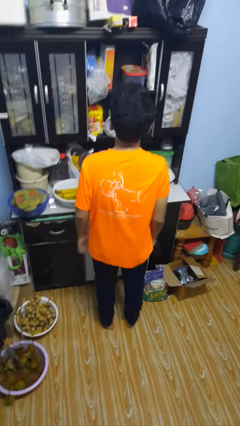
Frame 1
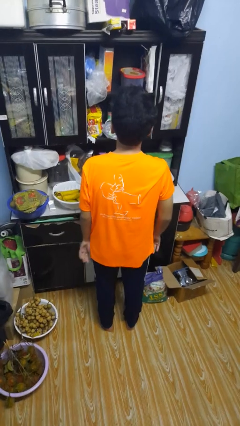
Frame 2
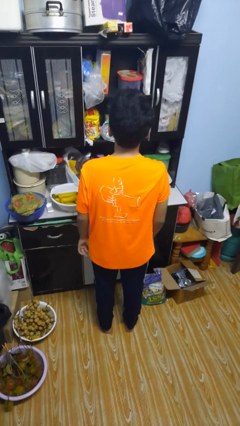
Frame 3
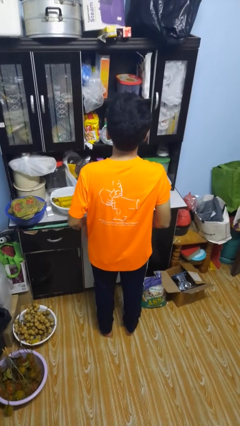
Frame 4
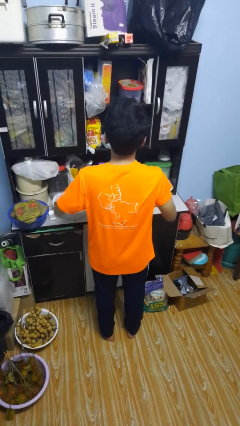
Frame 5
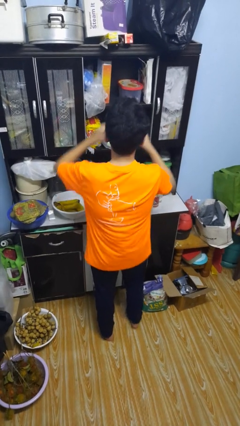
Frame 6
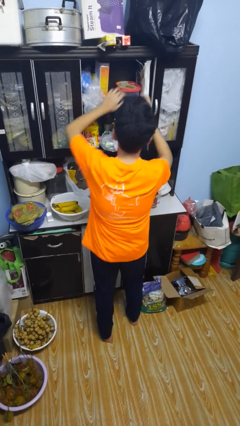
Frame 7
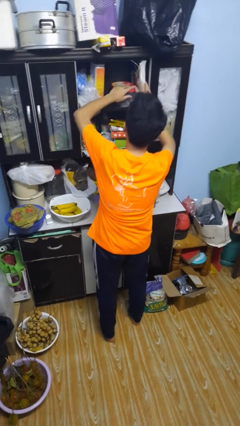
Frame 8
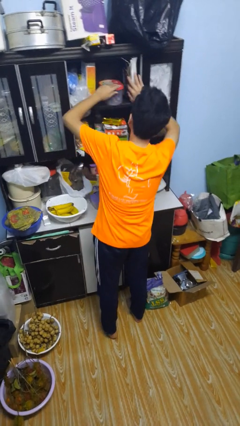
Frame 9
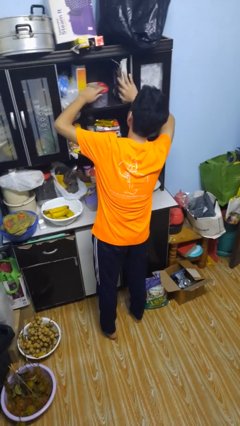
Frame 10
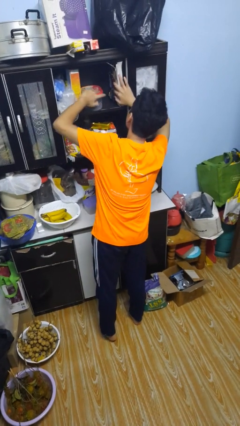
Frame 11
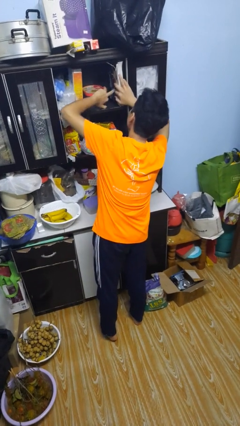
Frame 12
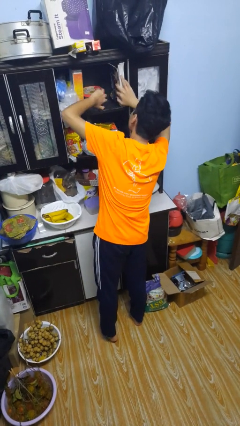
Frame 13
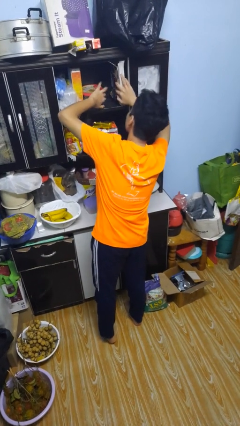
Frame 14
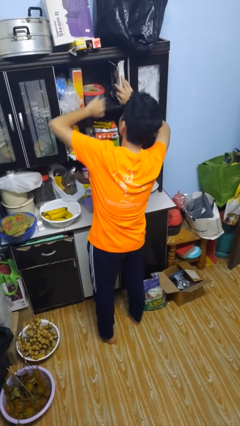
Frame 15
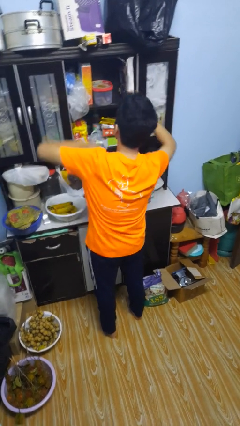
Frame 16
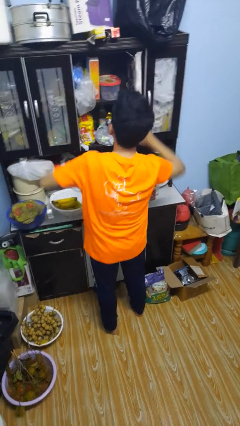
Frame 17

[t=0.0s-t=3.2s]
person searches in cabinet

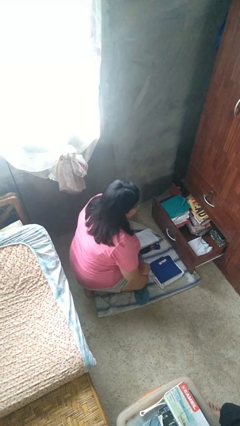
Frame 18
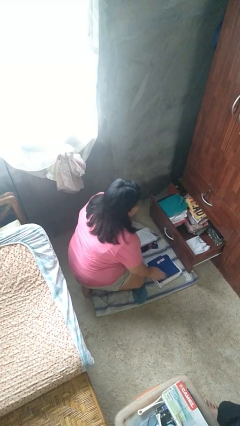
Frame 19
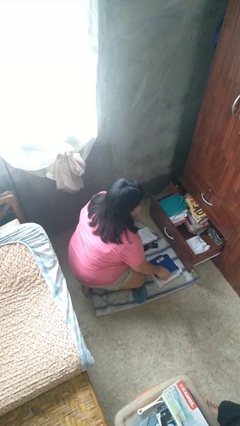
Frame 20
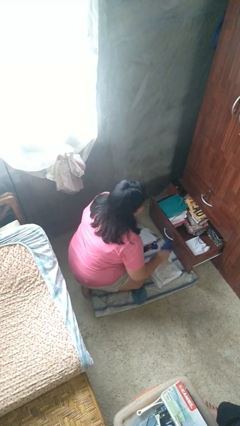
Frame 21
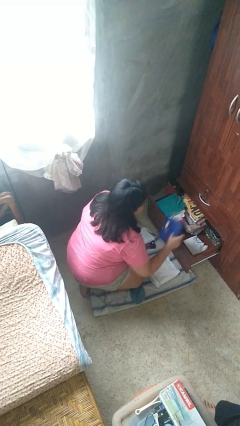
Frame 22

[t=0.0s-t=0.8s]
person puts clothes into dresser

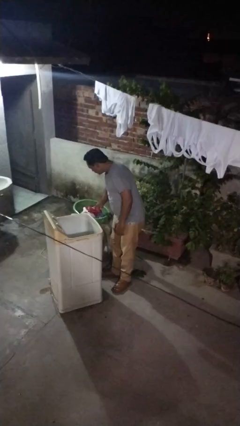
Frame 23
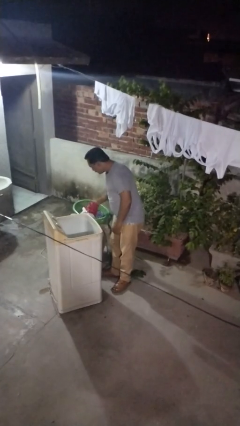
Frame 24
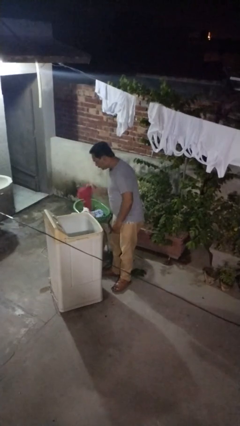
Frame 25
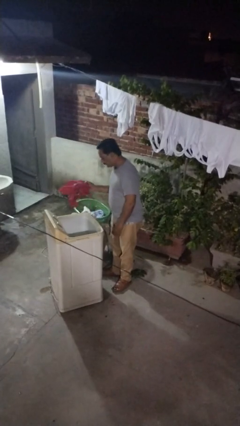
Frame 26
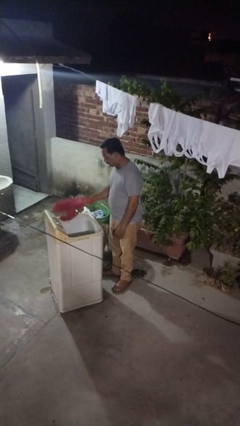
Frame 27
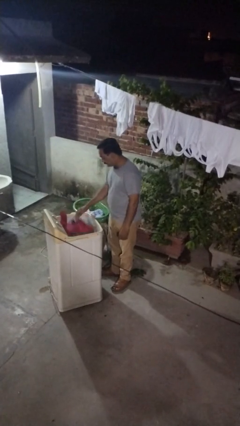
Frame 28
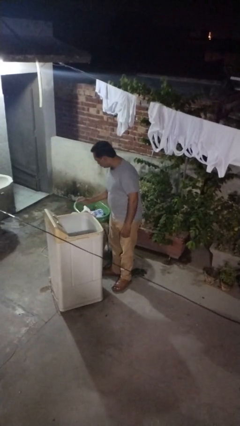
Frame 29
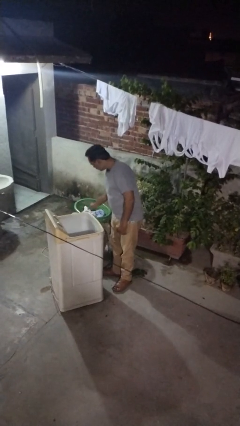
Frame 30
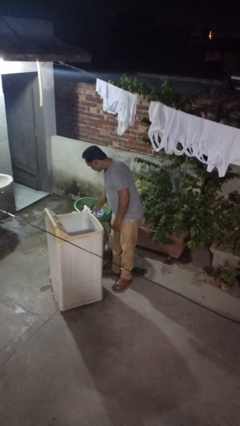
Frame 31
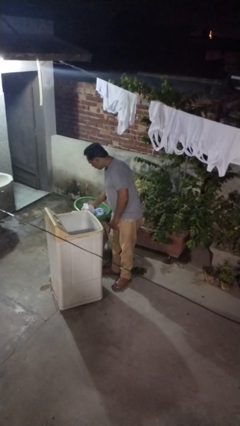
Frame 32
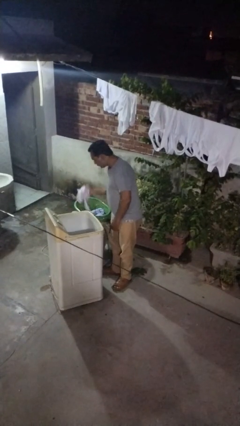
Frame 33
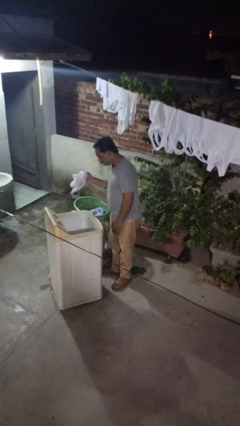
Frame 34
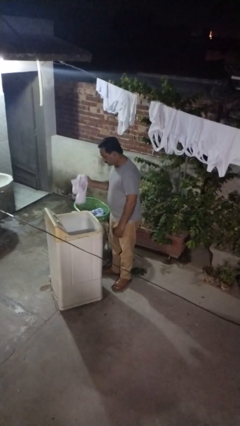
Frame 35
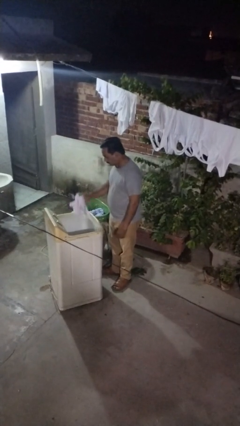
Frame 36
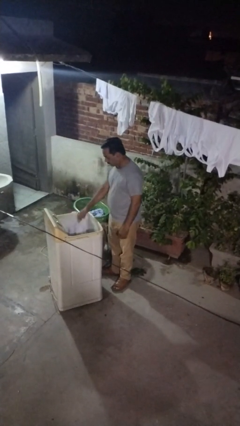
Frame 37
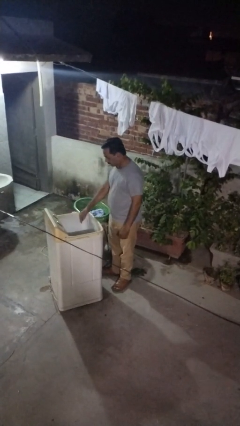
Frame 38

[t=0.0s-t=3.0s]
person unloads clotheswasher

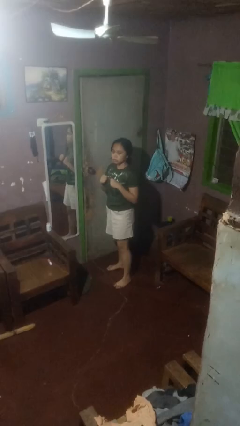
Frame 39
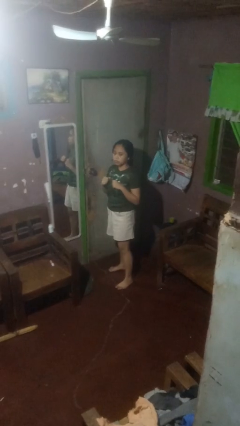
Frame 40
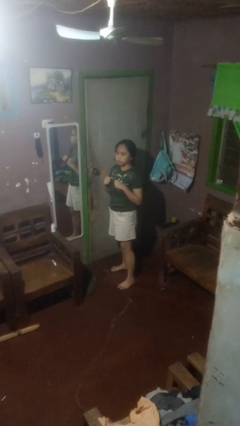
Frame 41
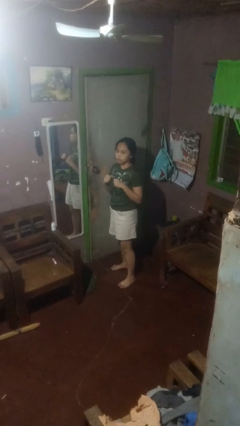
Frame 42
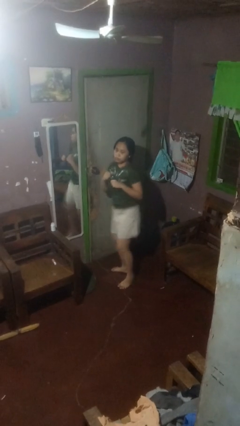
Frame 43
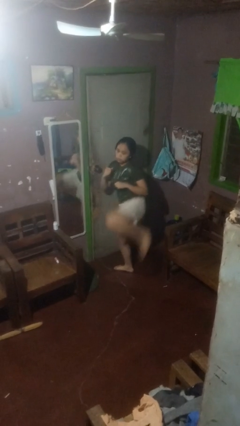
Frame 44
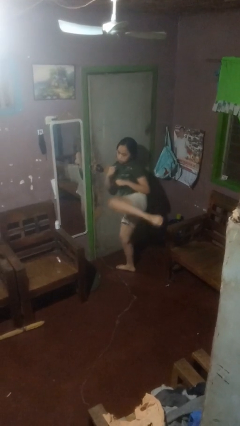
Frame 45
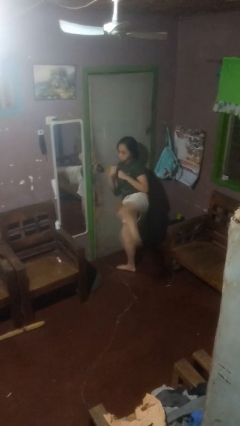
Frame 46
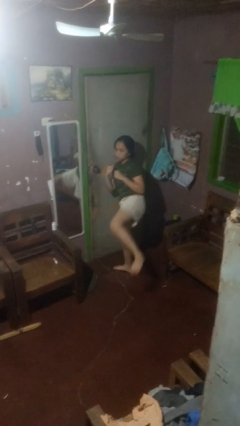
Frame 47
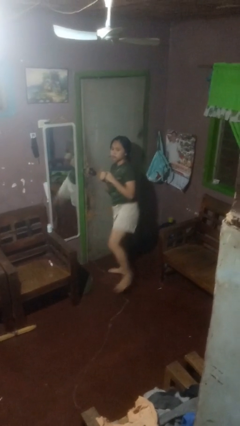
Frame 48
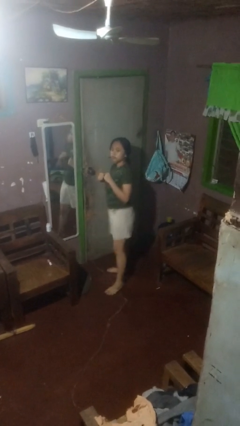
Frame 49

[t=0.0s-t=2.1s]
person karate kicks

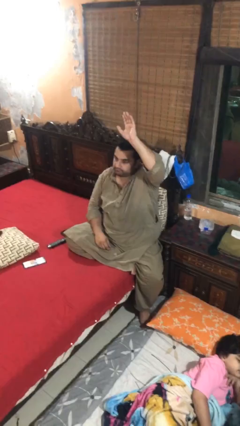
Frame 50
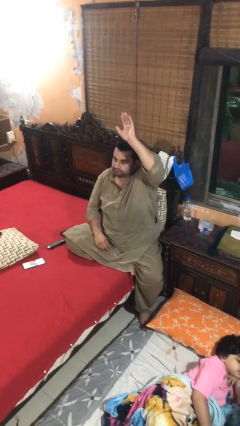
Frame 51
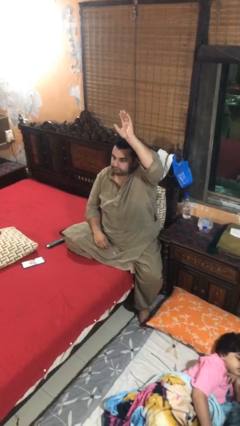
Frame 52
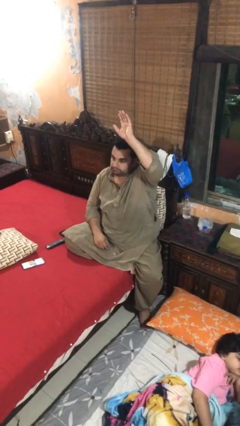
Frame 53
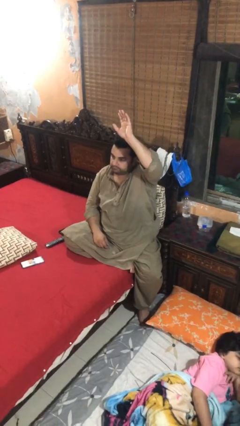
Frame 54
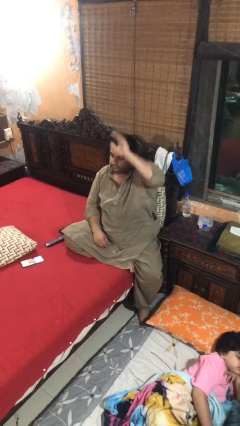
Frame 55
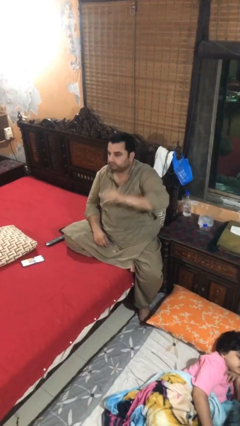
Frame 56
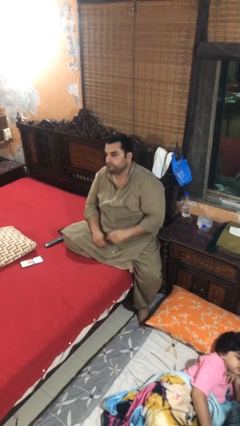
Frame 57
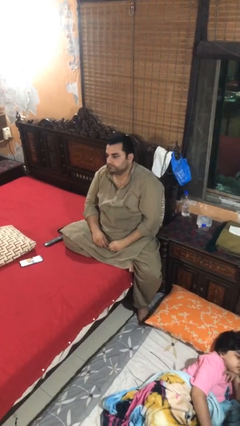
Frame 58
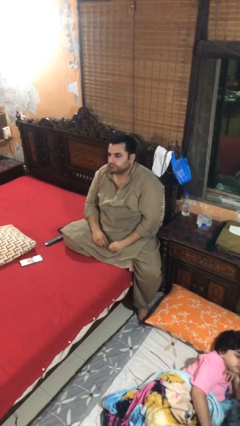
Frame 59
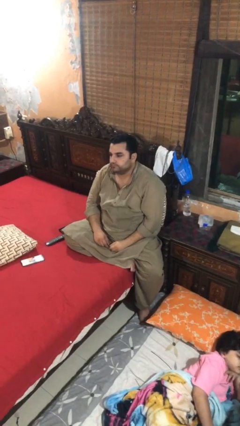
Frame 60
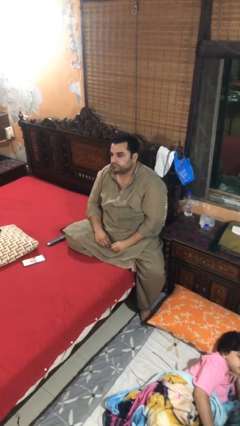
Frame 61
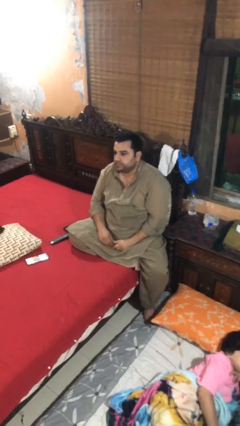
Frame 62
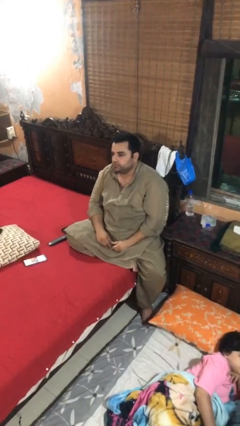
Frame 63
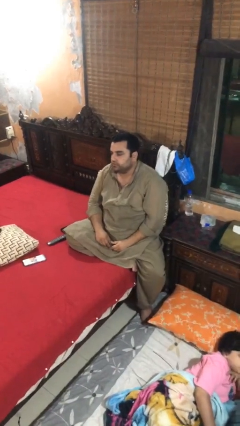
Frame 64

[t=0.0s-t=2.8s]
person gestures lower hand

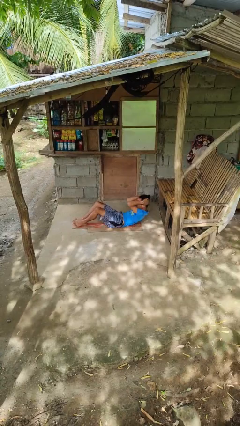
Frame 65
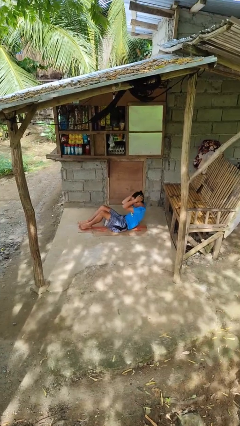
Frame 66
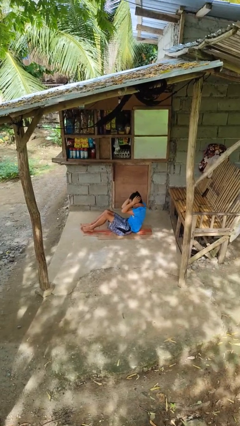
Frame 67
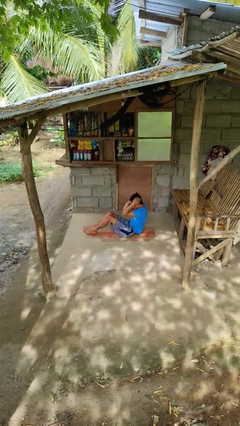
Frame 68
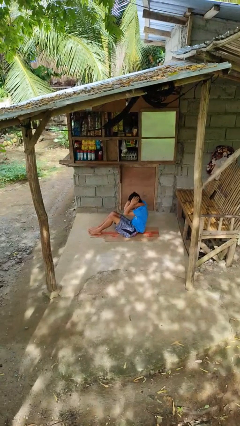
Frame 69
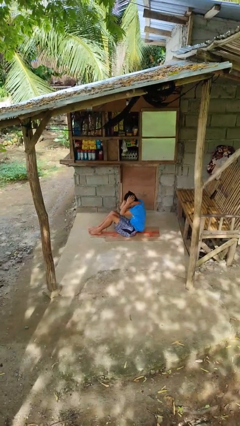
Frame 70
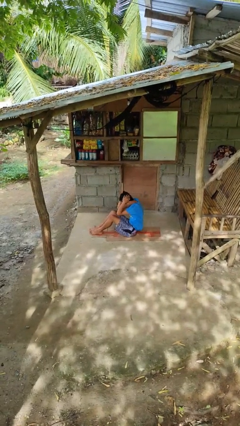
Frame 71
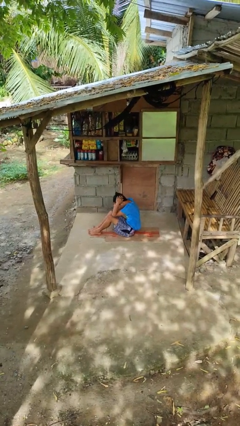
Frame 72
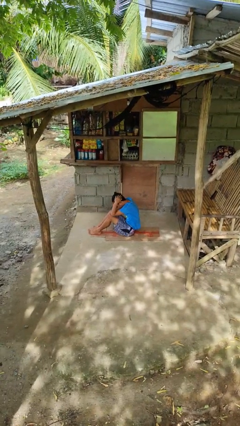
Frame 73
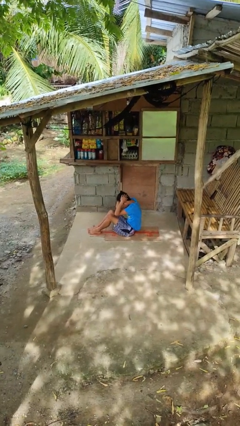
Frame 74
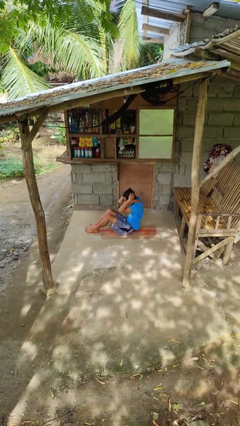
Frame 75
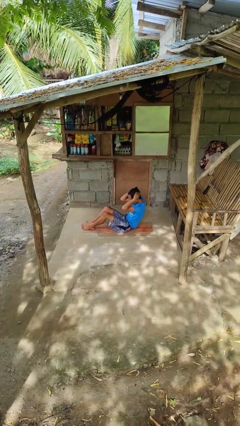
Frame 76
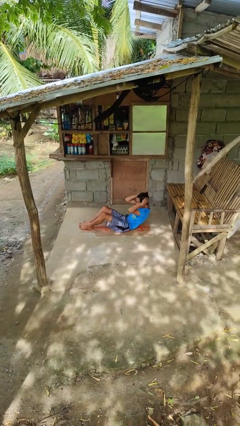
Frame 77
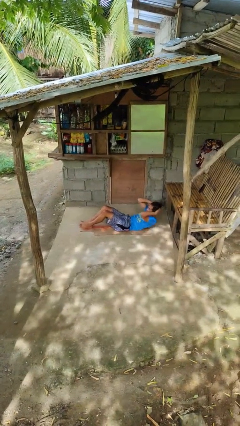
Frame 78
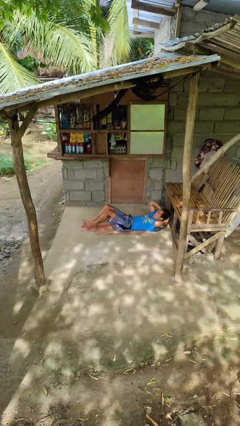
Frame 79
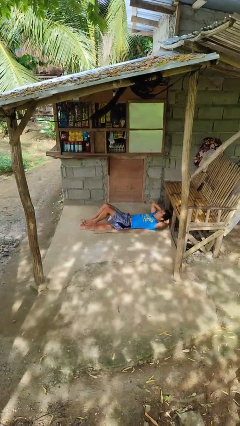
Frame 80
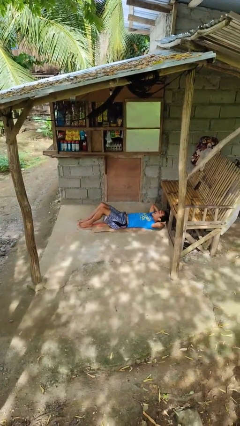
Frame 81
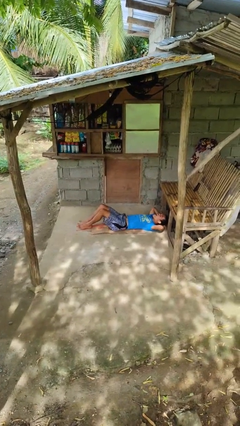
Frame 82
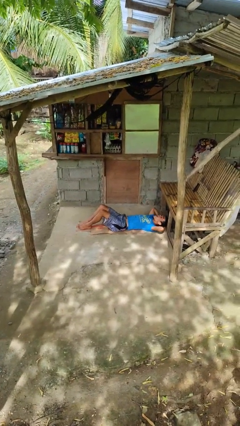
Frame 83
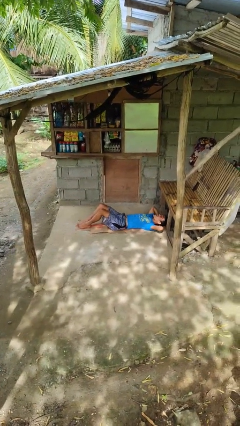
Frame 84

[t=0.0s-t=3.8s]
person exercises with situp

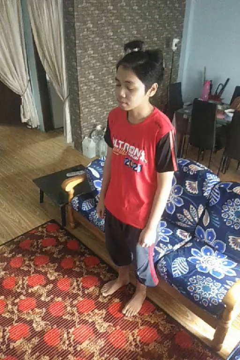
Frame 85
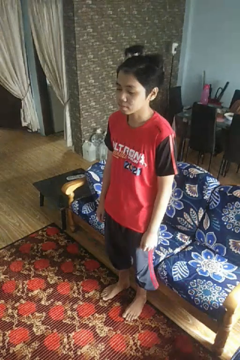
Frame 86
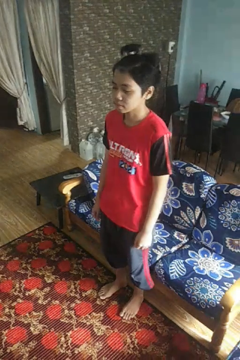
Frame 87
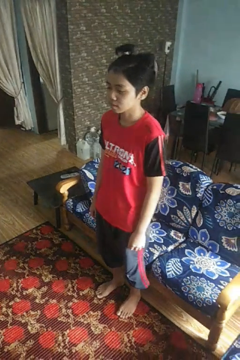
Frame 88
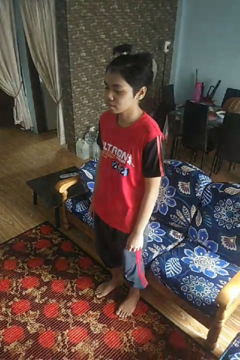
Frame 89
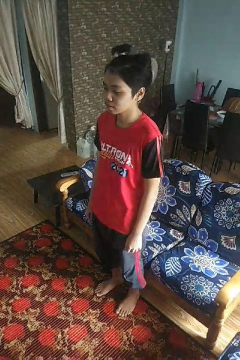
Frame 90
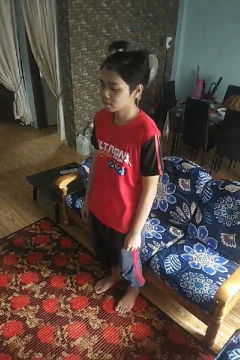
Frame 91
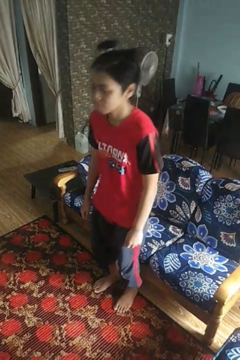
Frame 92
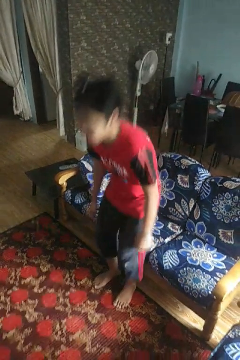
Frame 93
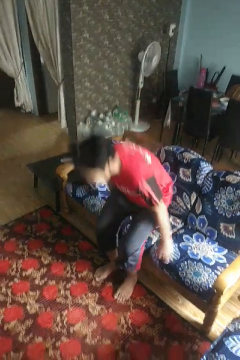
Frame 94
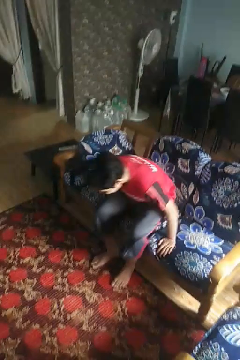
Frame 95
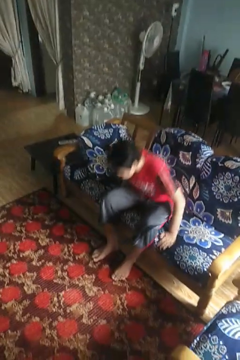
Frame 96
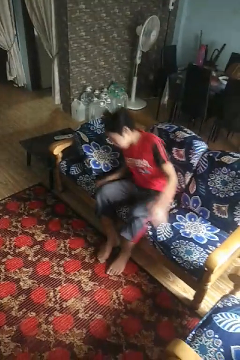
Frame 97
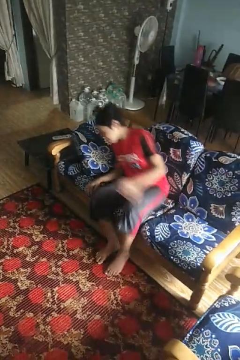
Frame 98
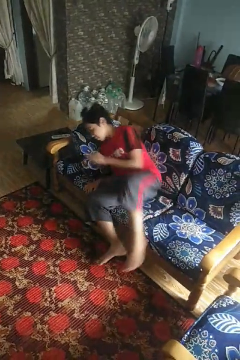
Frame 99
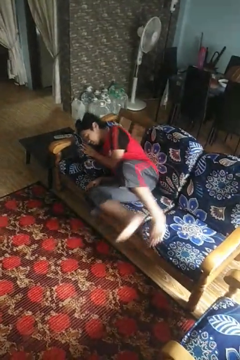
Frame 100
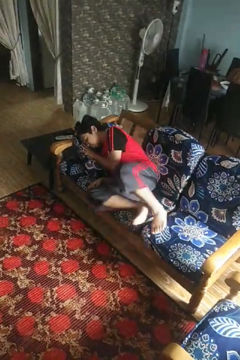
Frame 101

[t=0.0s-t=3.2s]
person lies down on couch
